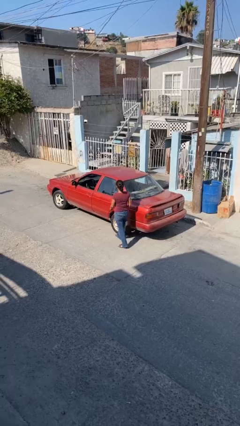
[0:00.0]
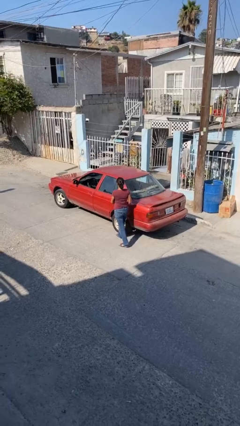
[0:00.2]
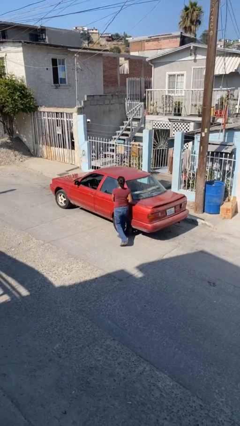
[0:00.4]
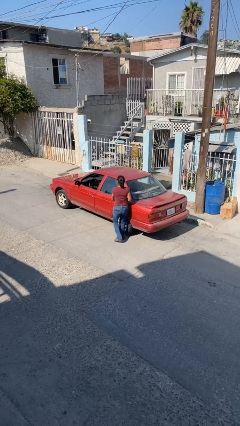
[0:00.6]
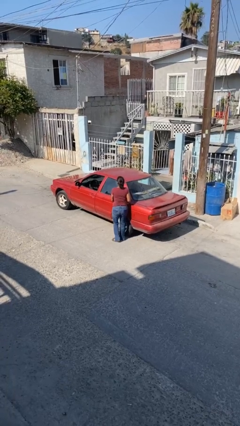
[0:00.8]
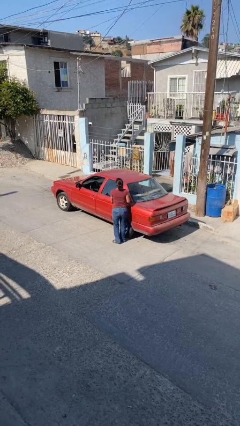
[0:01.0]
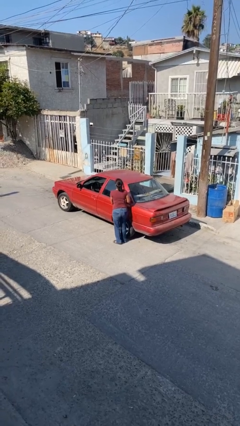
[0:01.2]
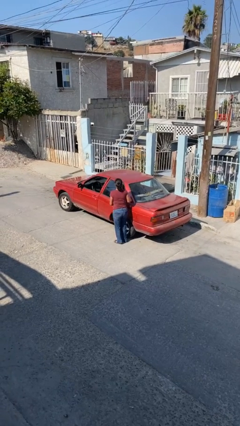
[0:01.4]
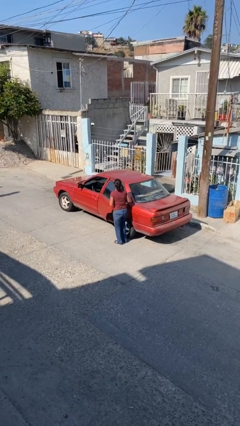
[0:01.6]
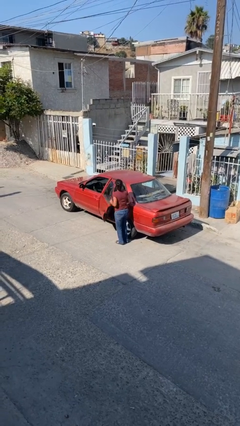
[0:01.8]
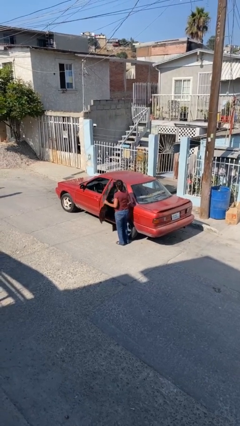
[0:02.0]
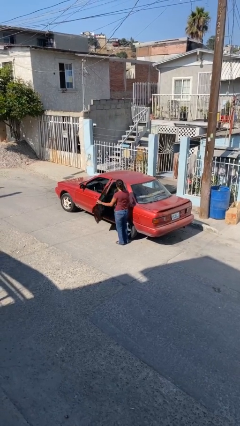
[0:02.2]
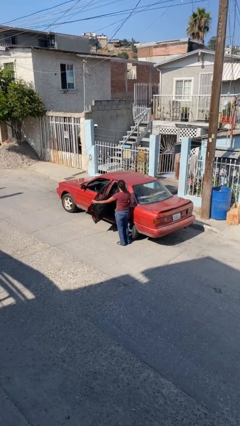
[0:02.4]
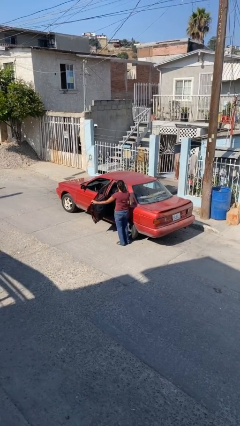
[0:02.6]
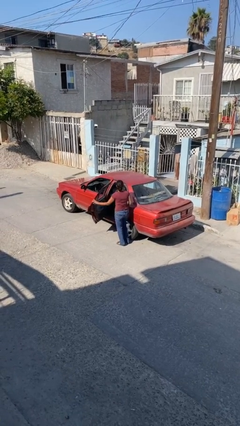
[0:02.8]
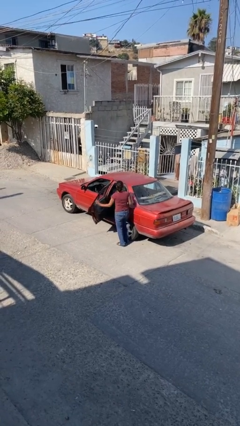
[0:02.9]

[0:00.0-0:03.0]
person opens car door

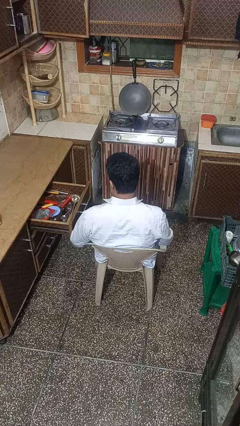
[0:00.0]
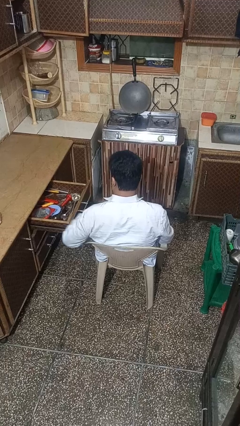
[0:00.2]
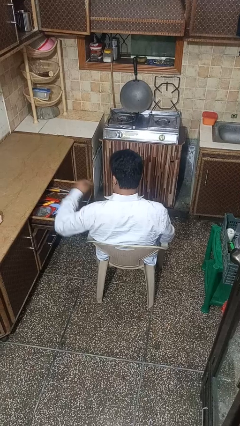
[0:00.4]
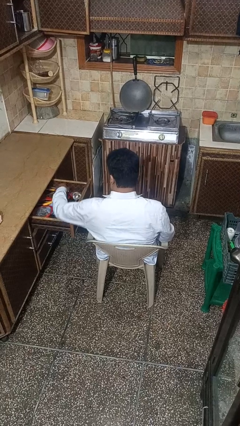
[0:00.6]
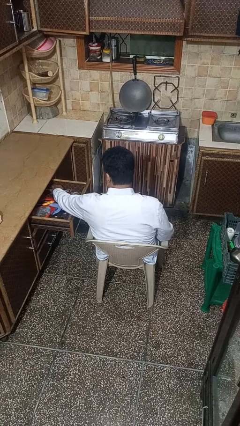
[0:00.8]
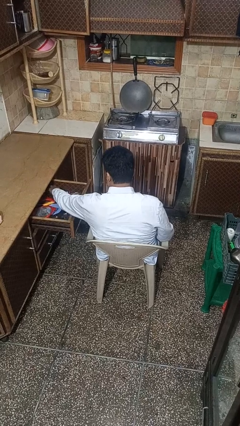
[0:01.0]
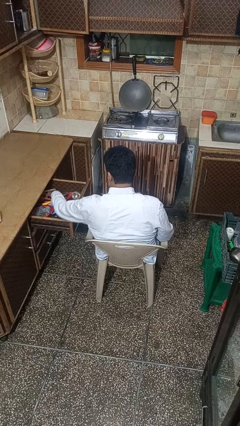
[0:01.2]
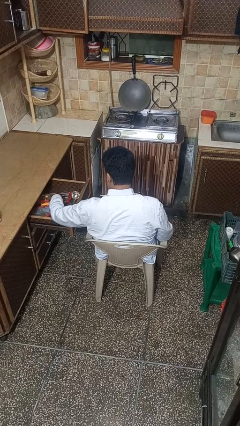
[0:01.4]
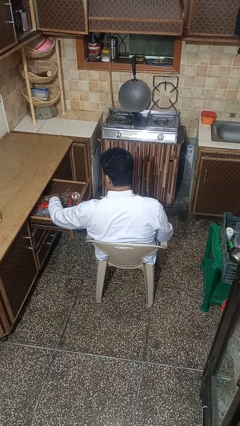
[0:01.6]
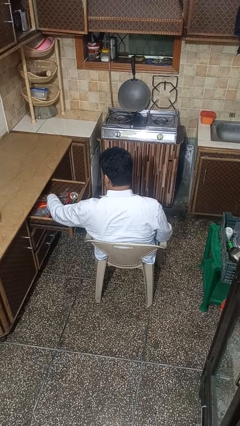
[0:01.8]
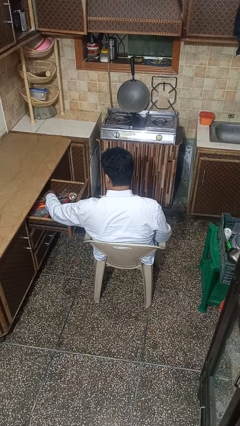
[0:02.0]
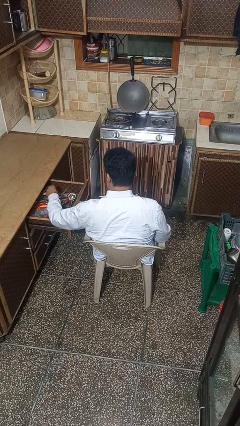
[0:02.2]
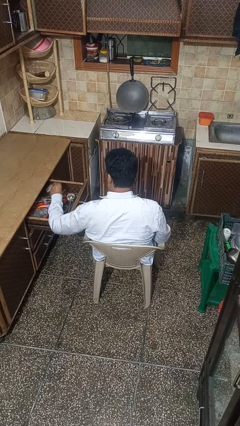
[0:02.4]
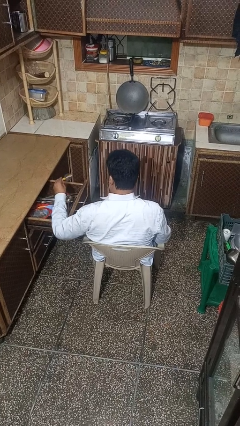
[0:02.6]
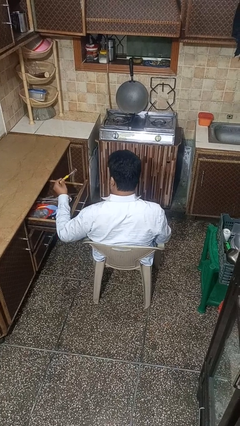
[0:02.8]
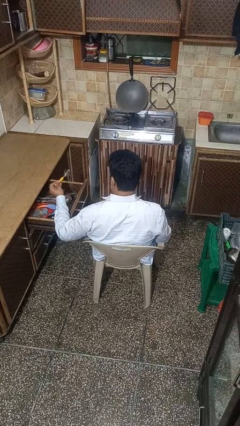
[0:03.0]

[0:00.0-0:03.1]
person takes object from kitchen drawer

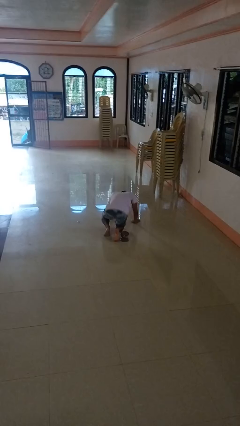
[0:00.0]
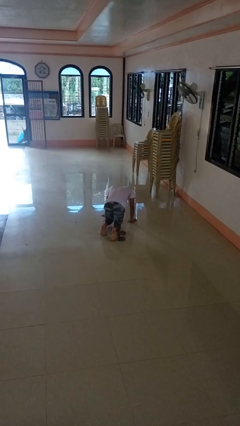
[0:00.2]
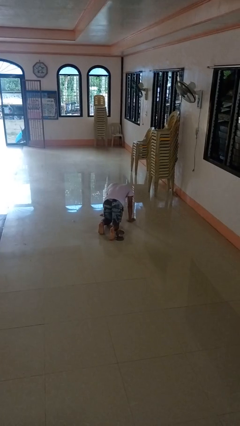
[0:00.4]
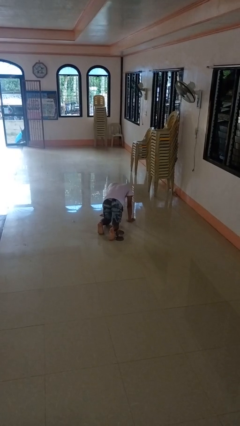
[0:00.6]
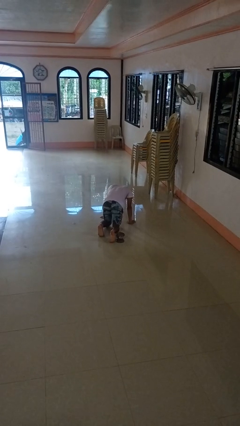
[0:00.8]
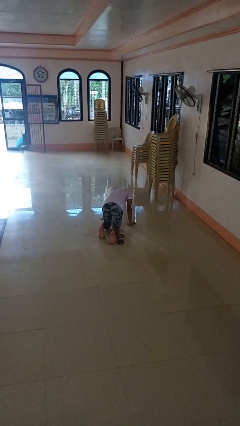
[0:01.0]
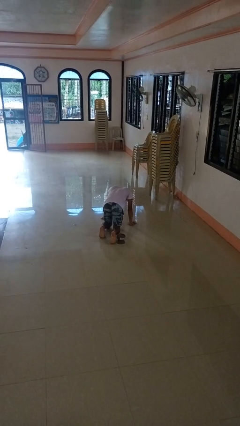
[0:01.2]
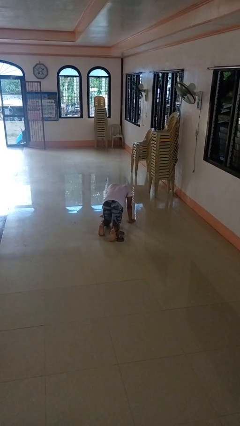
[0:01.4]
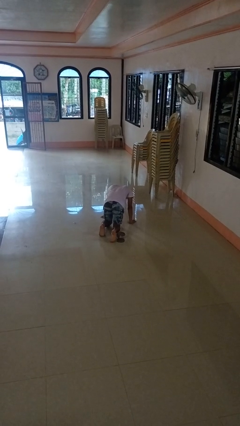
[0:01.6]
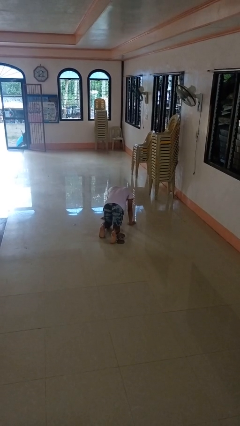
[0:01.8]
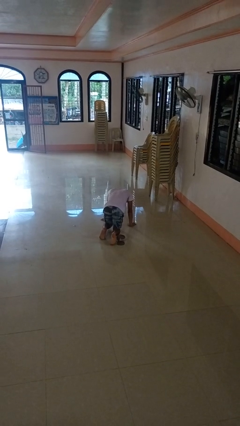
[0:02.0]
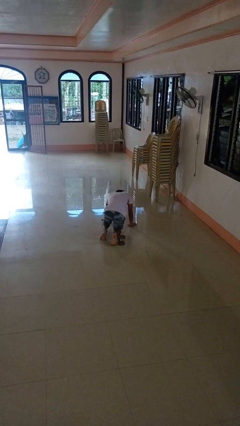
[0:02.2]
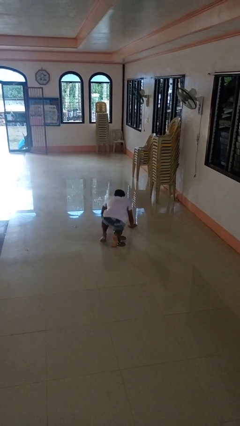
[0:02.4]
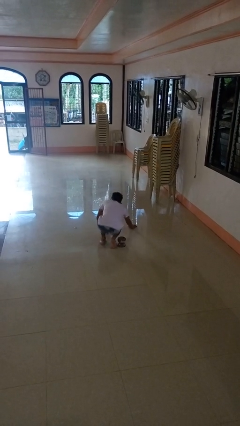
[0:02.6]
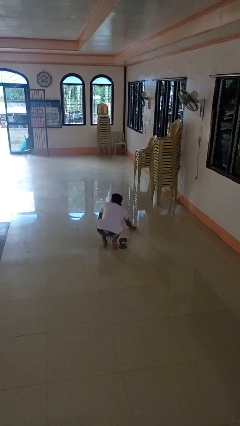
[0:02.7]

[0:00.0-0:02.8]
person trips on object on floor

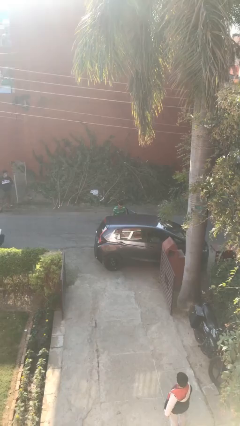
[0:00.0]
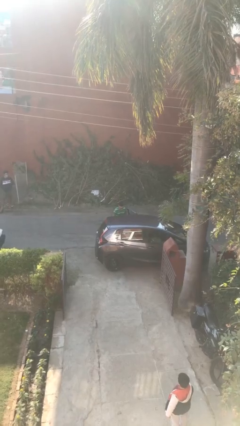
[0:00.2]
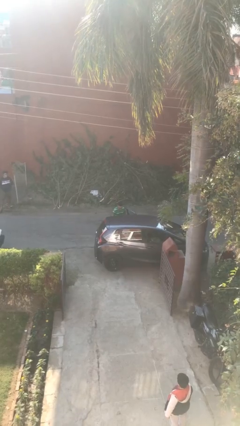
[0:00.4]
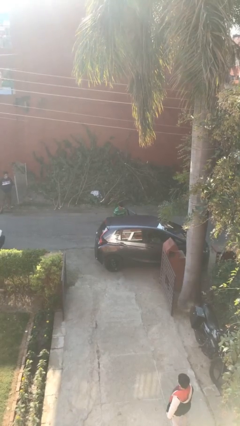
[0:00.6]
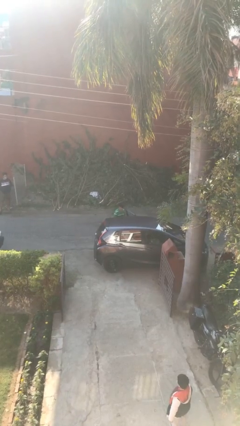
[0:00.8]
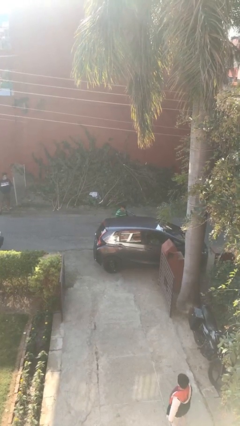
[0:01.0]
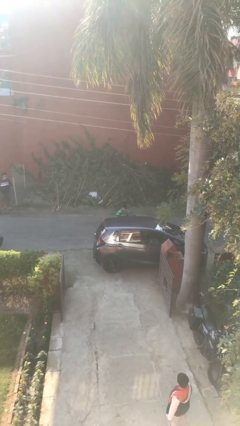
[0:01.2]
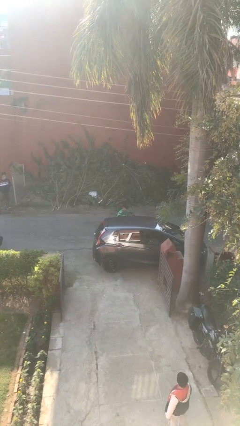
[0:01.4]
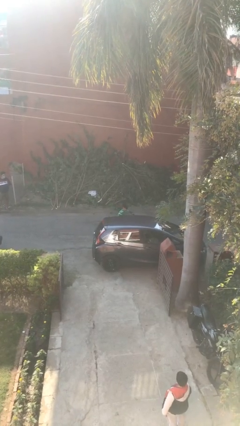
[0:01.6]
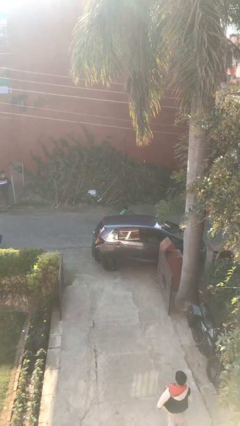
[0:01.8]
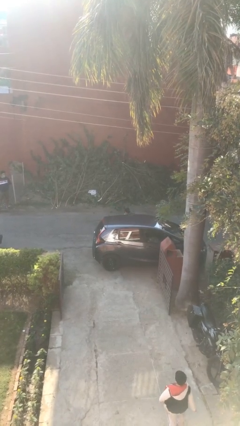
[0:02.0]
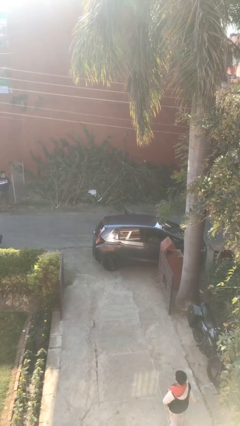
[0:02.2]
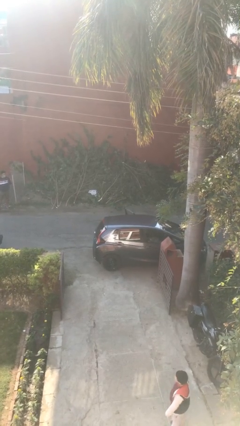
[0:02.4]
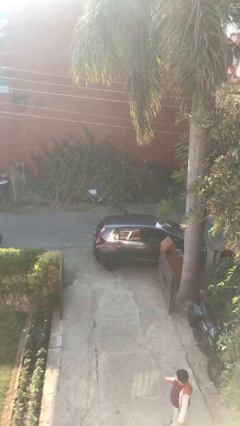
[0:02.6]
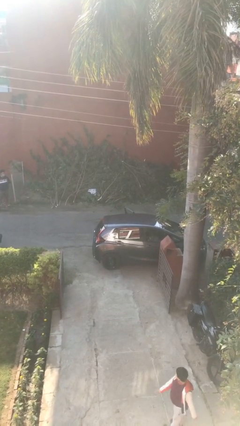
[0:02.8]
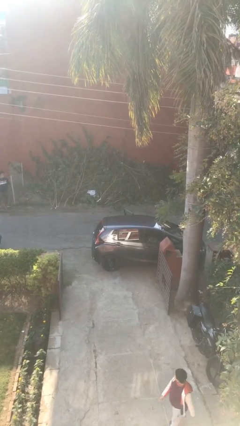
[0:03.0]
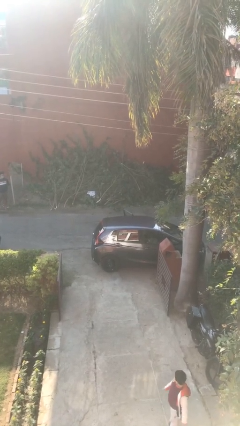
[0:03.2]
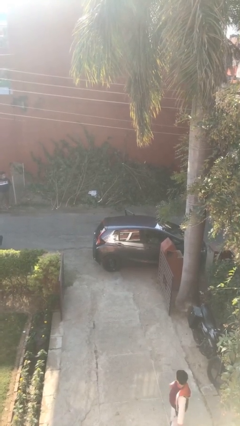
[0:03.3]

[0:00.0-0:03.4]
person enters car

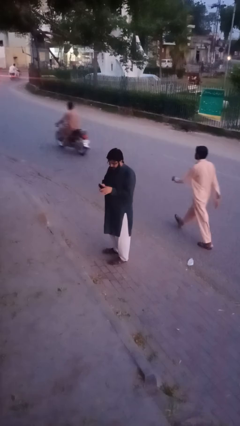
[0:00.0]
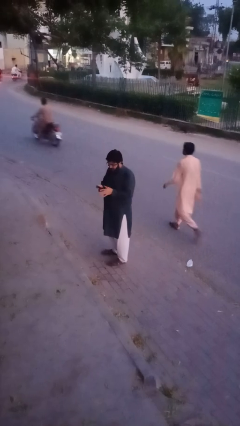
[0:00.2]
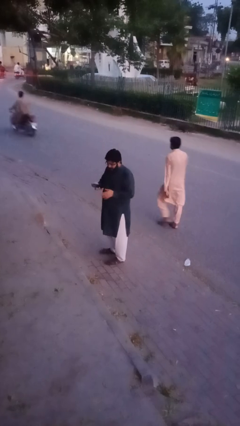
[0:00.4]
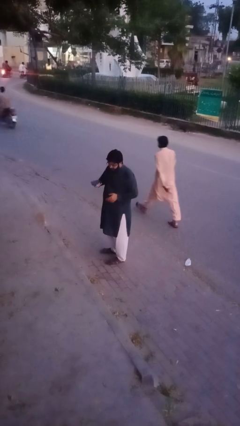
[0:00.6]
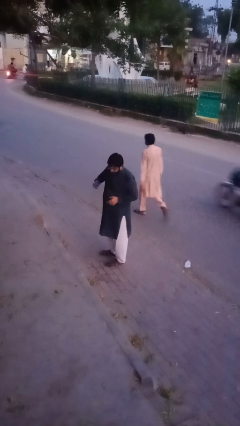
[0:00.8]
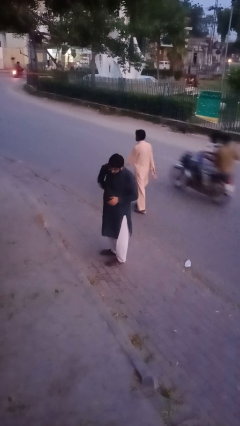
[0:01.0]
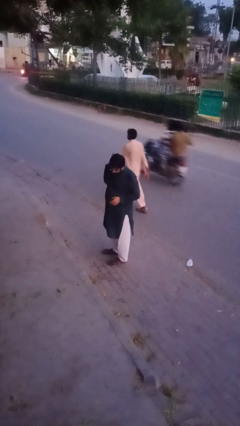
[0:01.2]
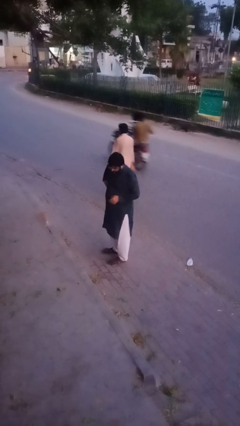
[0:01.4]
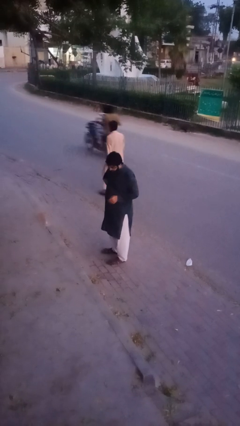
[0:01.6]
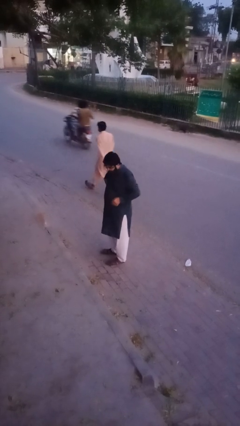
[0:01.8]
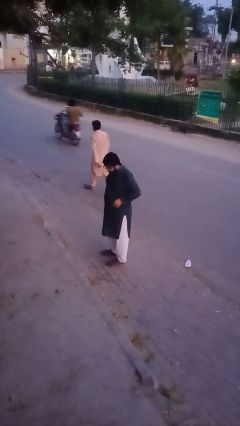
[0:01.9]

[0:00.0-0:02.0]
person puts phone into pocket

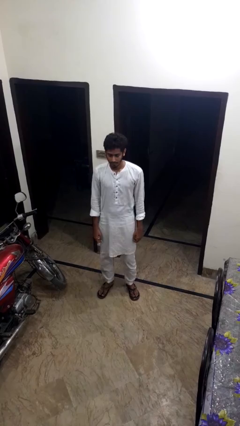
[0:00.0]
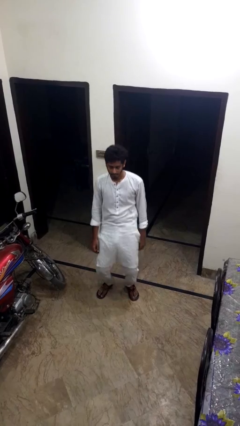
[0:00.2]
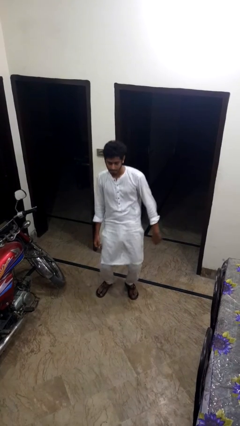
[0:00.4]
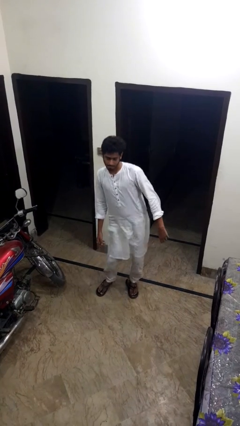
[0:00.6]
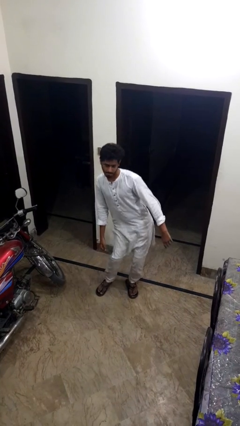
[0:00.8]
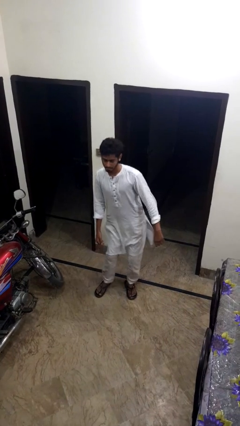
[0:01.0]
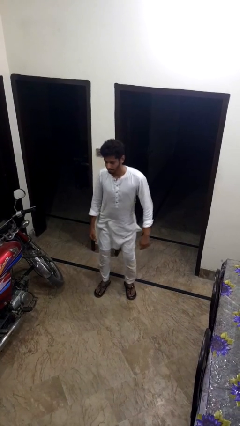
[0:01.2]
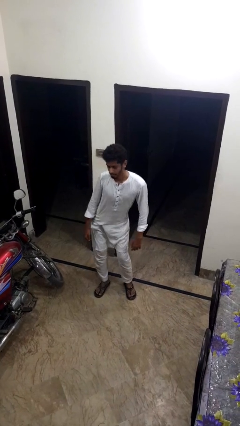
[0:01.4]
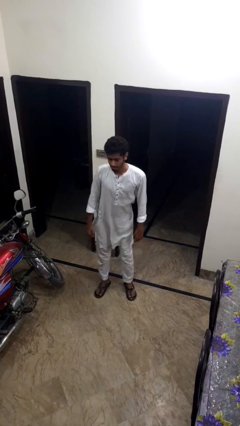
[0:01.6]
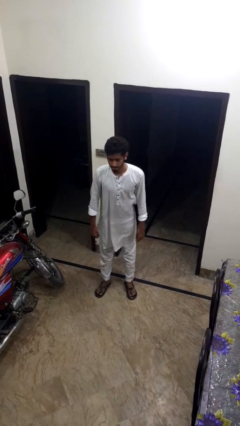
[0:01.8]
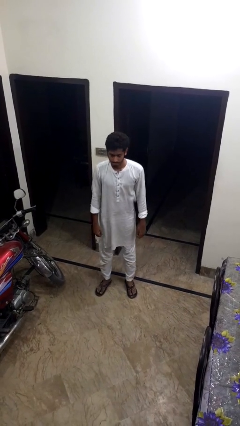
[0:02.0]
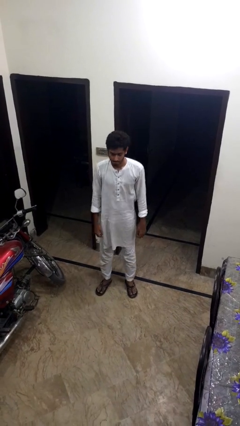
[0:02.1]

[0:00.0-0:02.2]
person wiggles hips

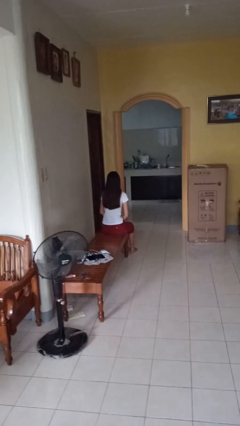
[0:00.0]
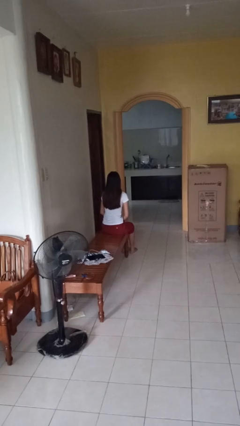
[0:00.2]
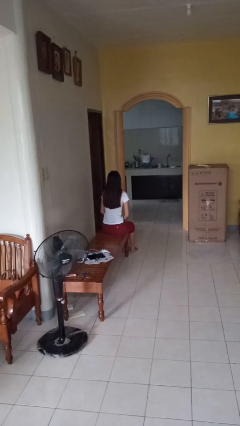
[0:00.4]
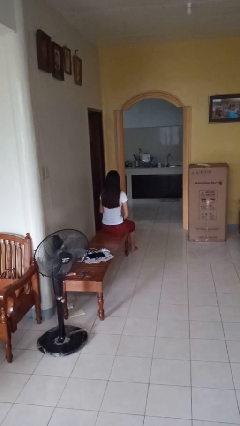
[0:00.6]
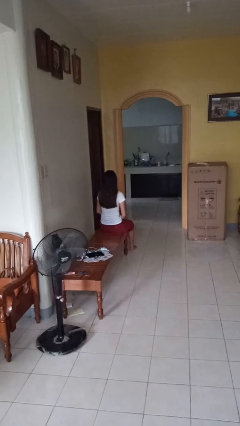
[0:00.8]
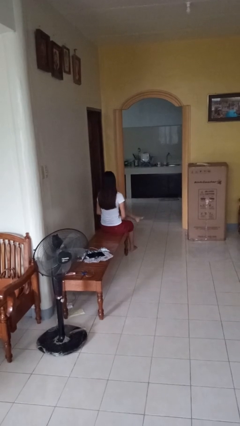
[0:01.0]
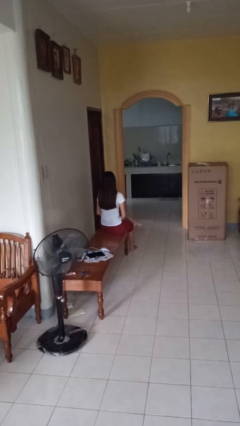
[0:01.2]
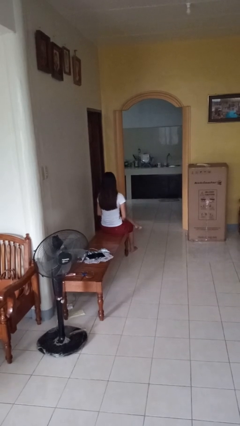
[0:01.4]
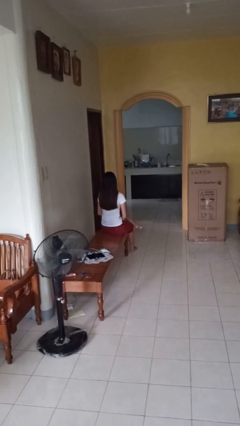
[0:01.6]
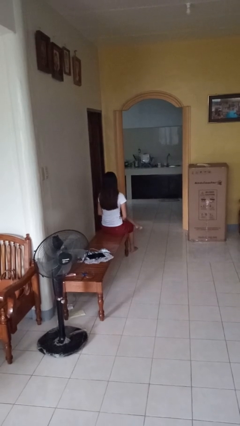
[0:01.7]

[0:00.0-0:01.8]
person crosses legs
